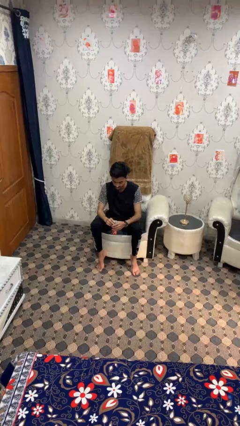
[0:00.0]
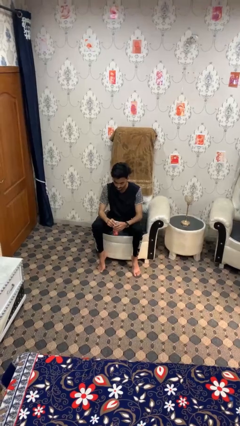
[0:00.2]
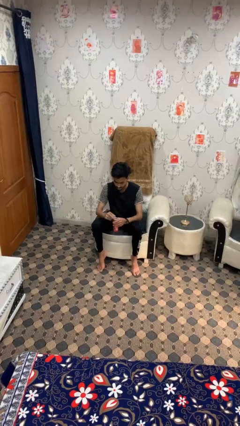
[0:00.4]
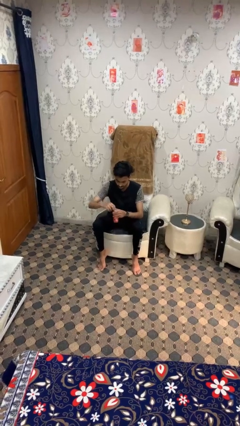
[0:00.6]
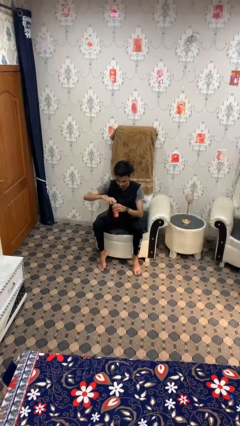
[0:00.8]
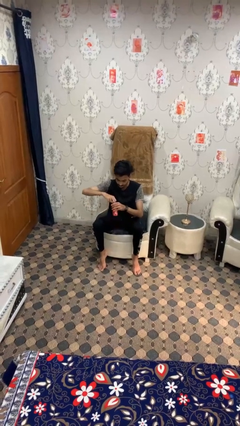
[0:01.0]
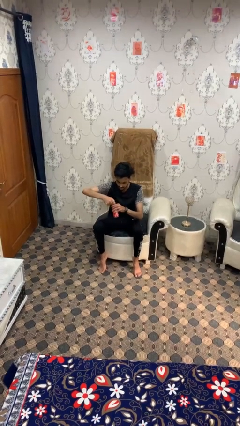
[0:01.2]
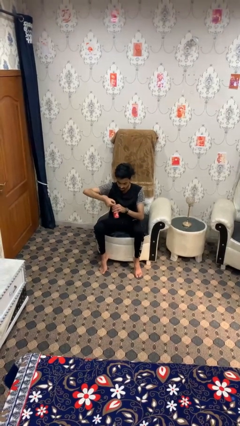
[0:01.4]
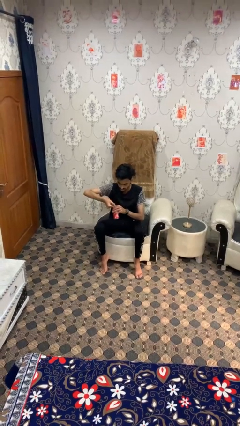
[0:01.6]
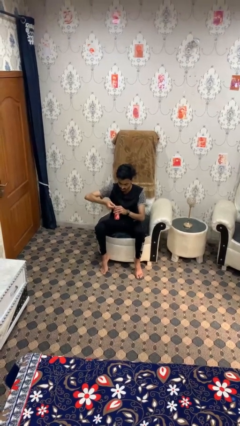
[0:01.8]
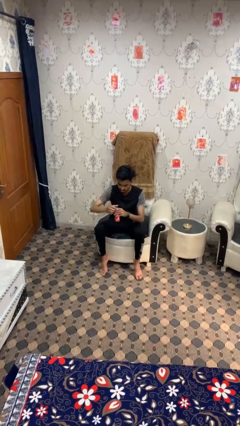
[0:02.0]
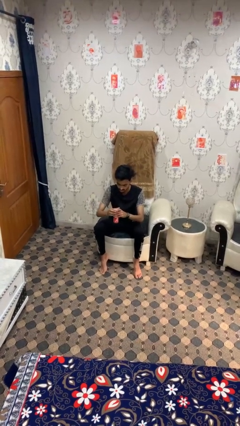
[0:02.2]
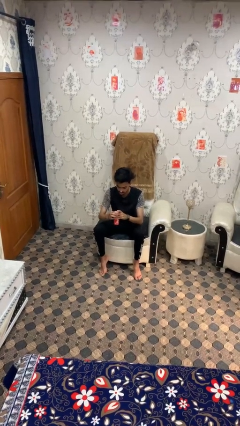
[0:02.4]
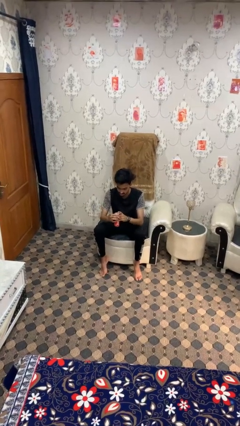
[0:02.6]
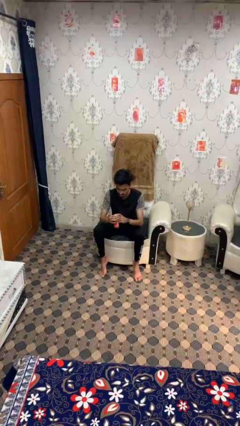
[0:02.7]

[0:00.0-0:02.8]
person opens beverage can

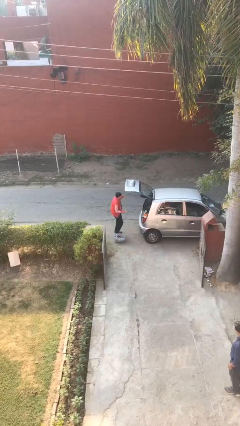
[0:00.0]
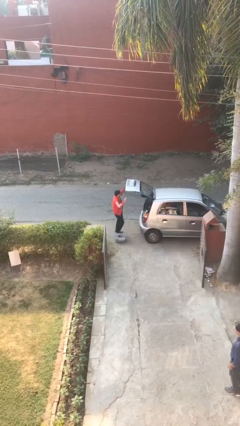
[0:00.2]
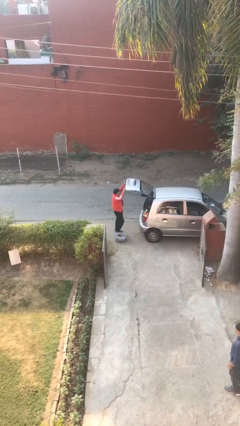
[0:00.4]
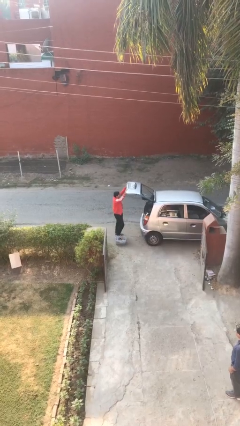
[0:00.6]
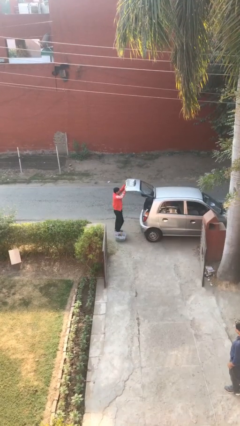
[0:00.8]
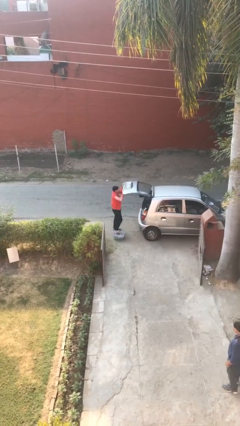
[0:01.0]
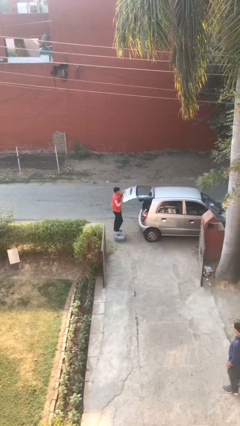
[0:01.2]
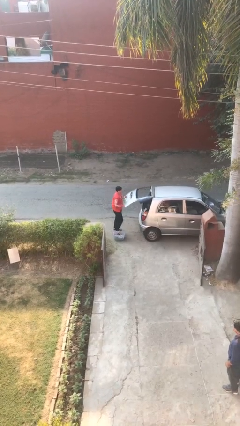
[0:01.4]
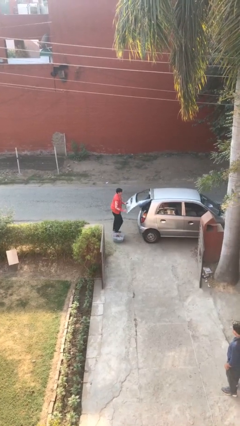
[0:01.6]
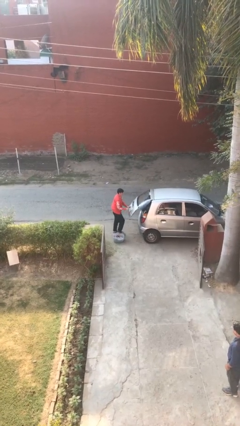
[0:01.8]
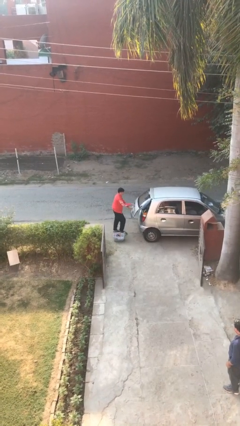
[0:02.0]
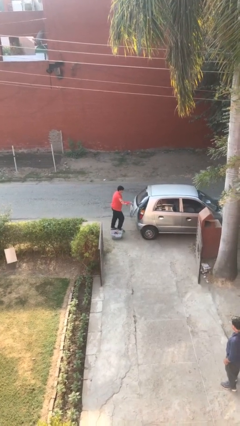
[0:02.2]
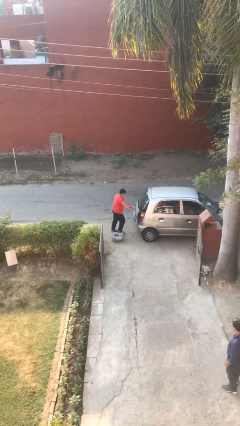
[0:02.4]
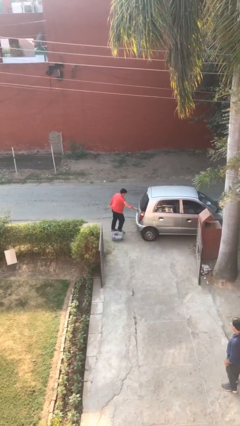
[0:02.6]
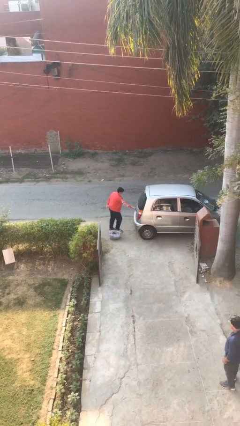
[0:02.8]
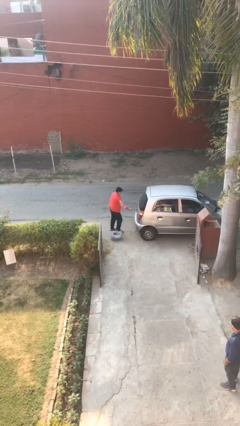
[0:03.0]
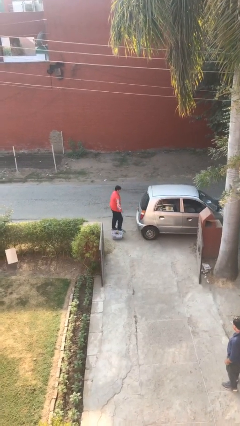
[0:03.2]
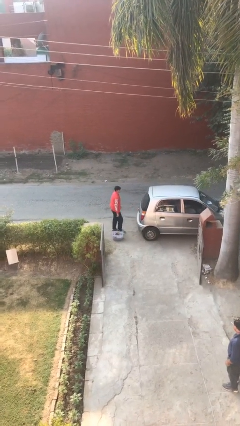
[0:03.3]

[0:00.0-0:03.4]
person closes car trunk

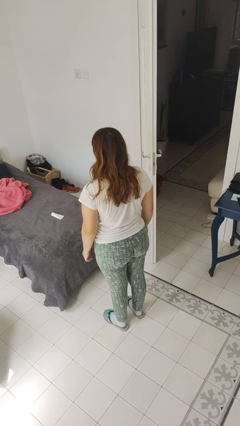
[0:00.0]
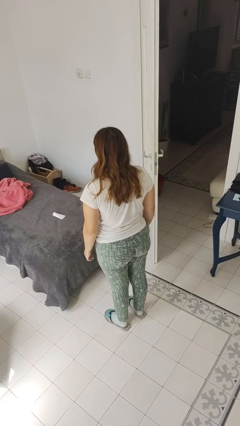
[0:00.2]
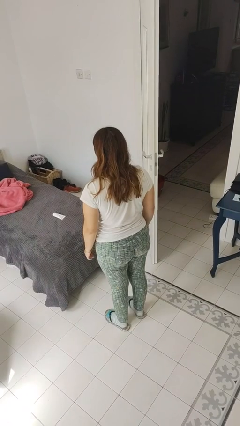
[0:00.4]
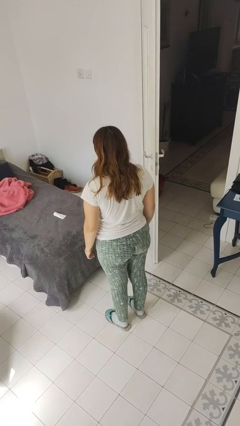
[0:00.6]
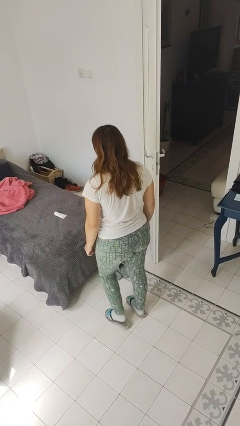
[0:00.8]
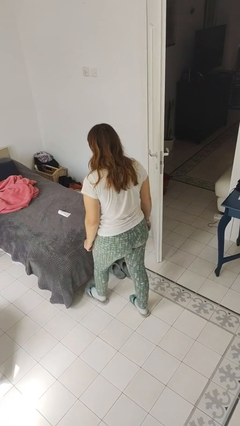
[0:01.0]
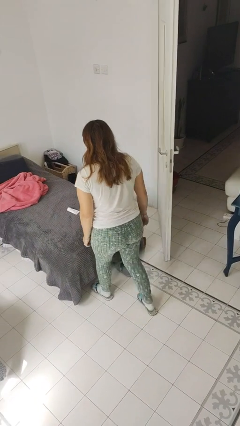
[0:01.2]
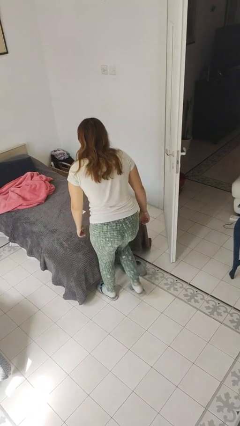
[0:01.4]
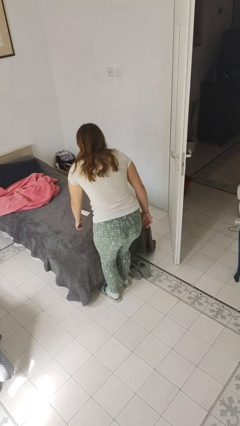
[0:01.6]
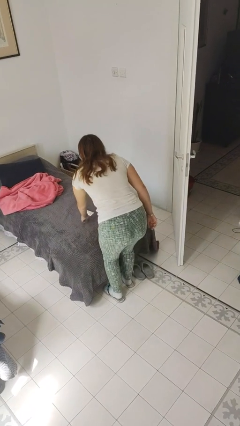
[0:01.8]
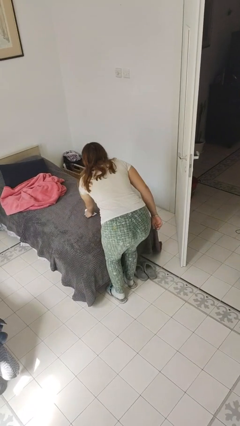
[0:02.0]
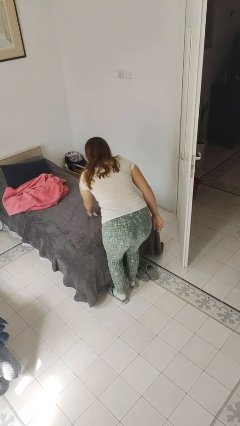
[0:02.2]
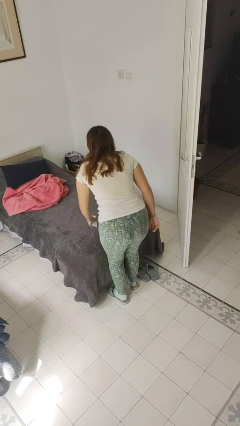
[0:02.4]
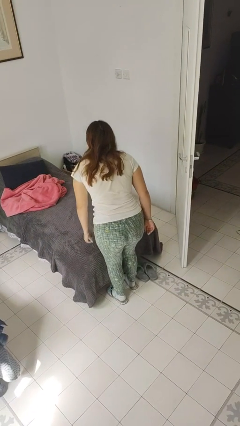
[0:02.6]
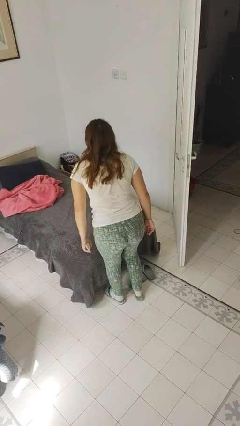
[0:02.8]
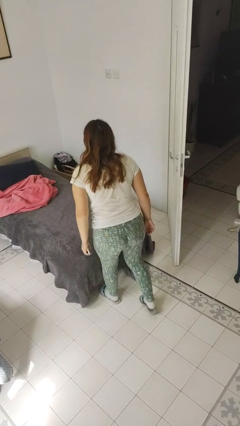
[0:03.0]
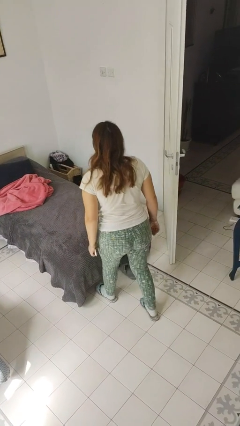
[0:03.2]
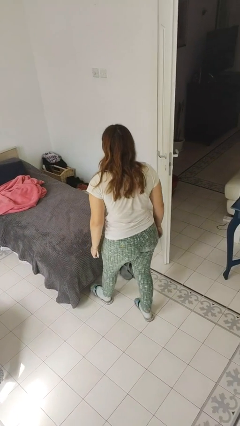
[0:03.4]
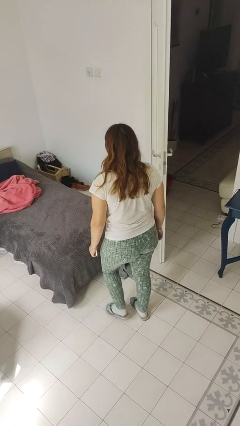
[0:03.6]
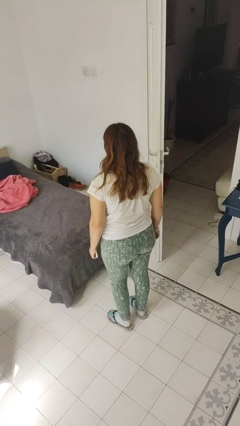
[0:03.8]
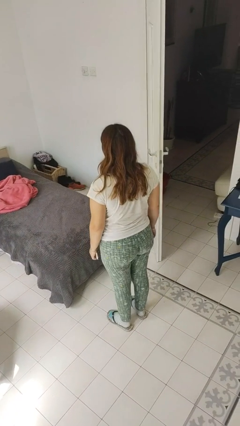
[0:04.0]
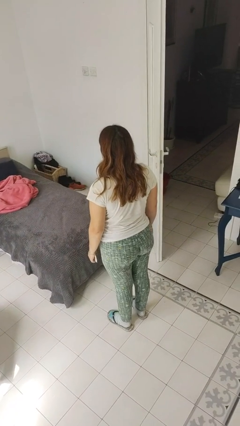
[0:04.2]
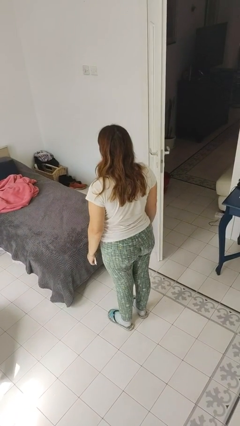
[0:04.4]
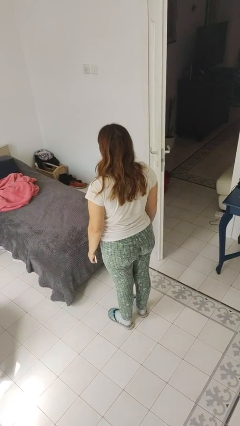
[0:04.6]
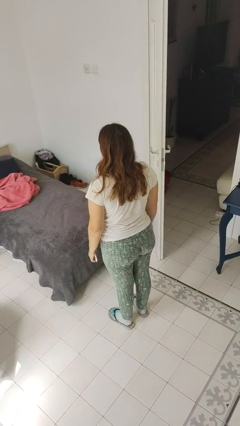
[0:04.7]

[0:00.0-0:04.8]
person picks up object from bed

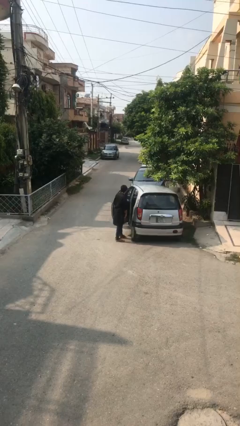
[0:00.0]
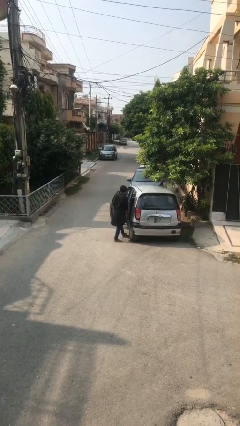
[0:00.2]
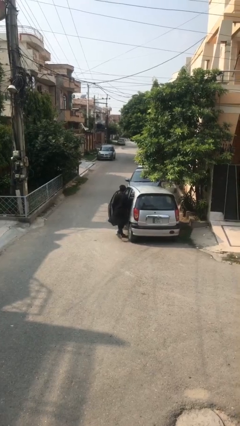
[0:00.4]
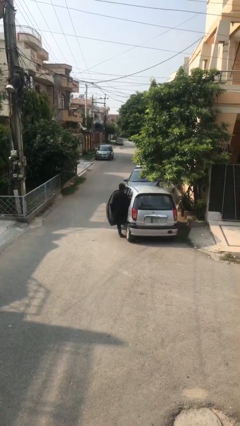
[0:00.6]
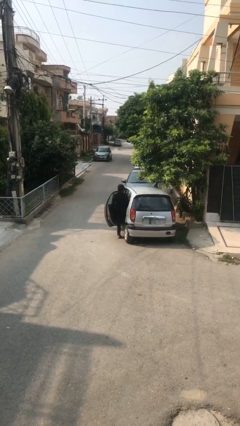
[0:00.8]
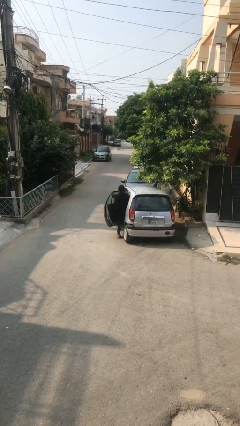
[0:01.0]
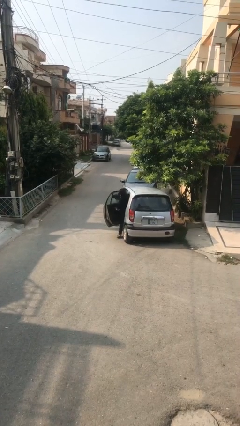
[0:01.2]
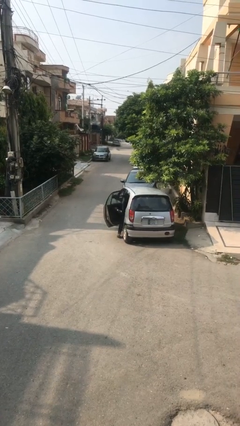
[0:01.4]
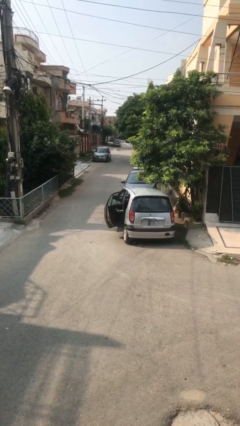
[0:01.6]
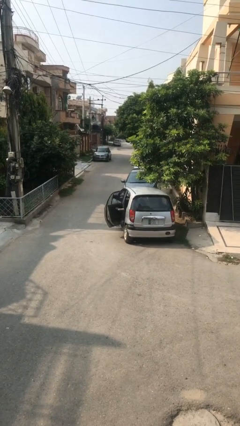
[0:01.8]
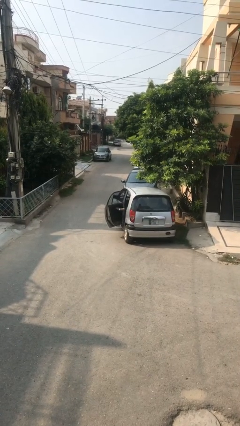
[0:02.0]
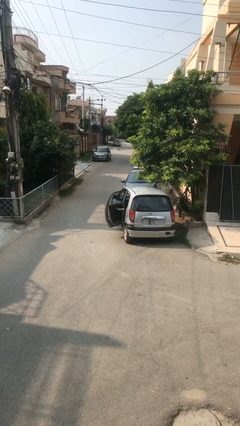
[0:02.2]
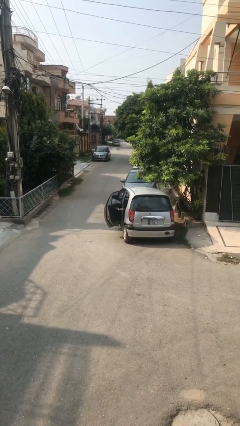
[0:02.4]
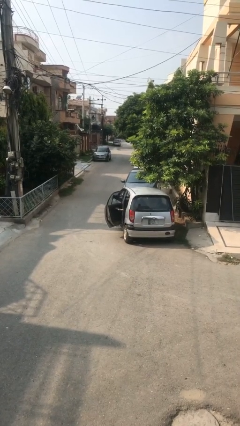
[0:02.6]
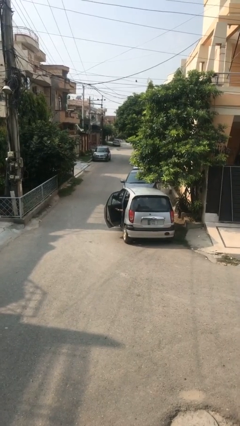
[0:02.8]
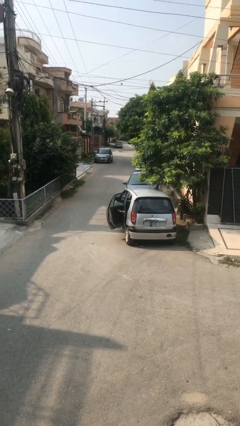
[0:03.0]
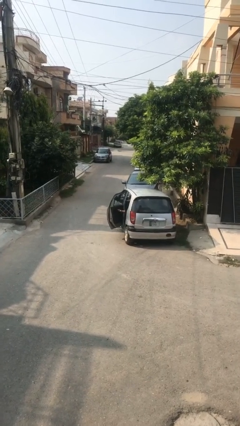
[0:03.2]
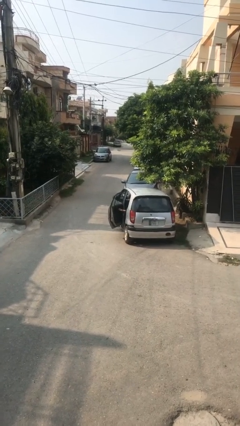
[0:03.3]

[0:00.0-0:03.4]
person enters car

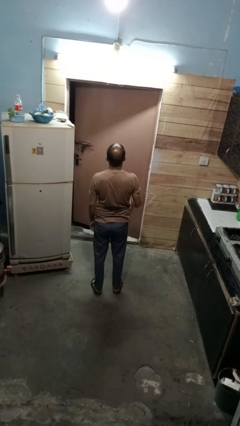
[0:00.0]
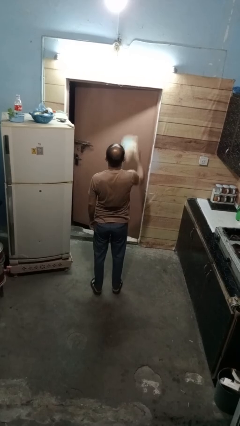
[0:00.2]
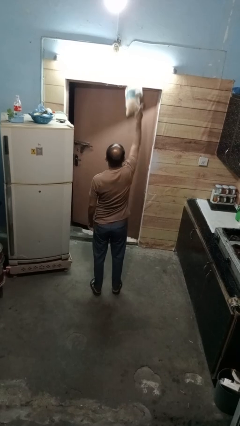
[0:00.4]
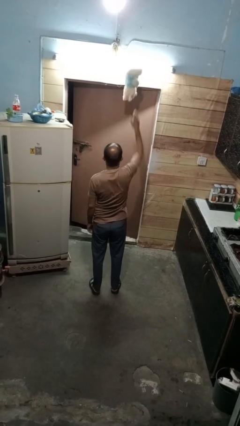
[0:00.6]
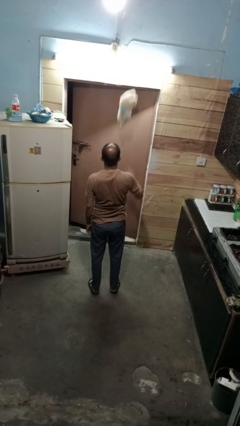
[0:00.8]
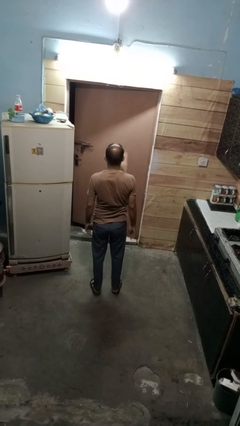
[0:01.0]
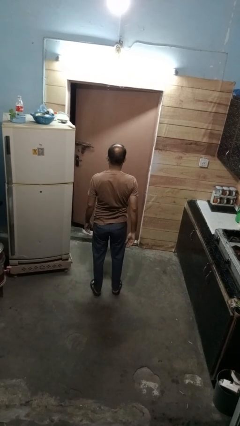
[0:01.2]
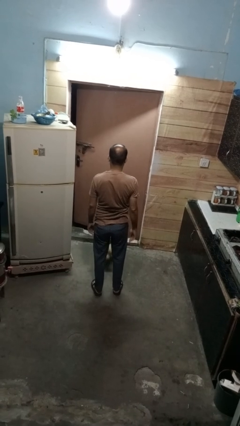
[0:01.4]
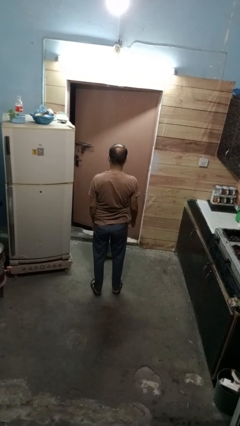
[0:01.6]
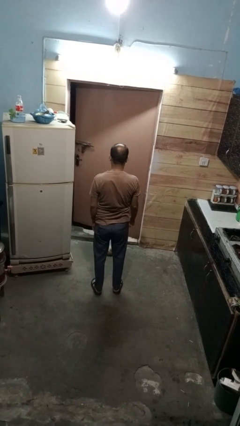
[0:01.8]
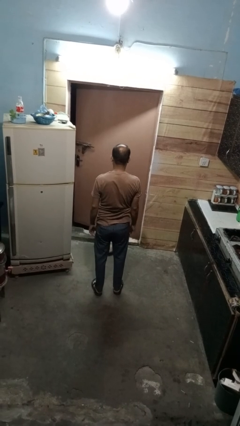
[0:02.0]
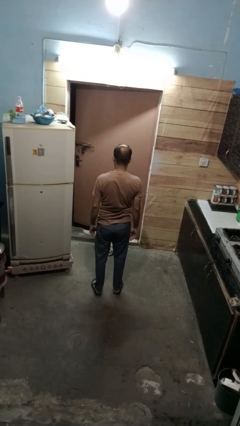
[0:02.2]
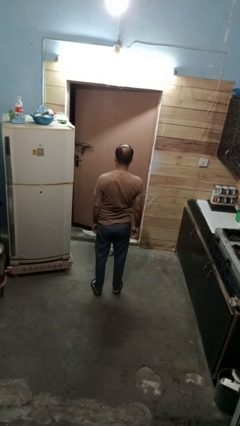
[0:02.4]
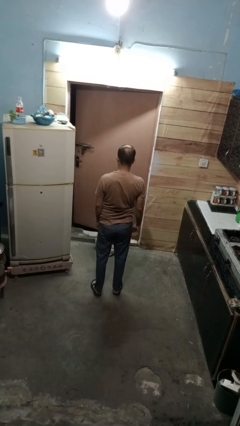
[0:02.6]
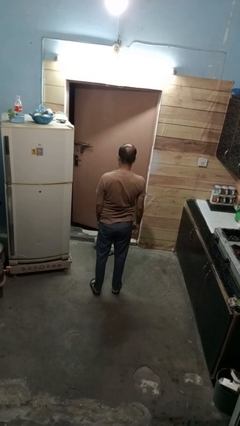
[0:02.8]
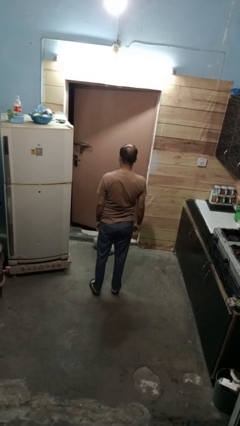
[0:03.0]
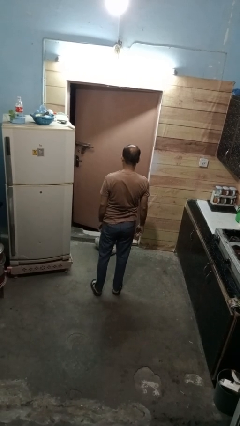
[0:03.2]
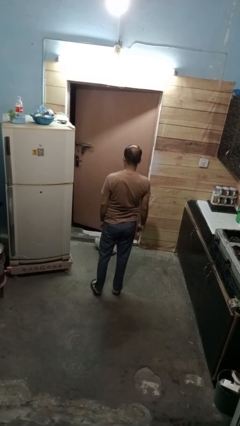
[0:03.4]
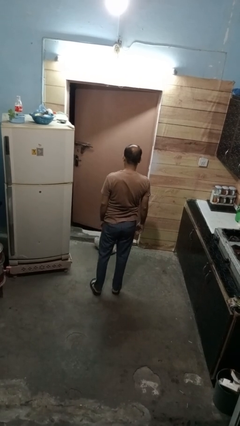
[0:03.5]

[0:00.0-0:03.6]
person throws object into air
